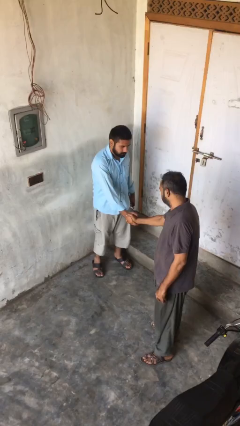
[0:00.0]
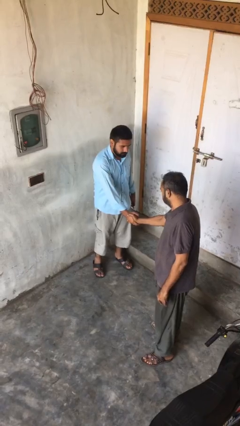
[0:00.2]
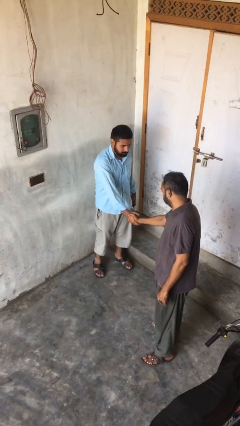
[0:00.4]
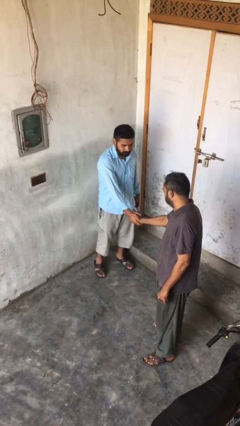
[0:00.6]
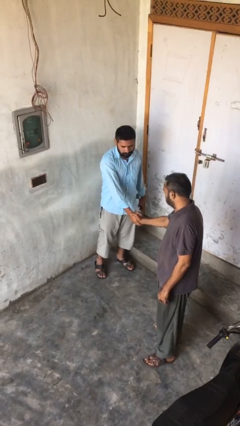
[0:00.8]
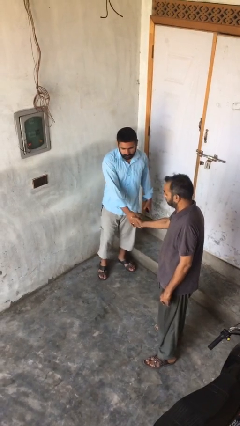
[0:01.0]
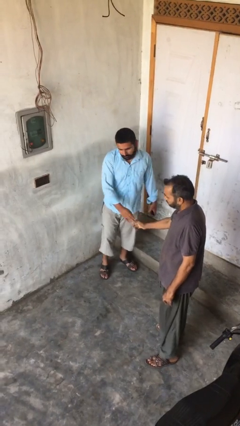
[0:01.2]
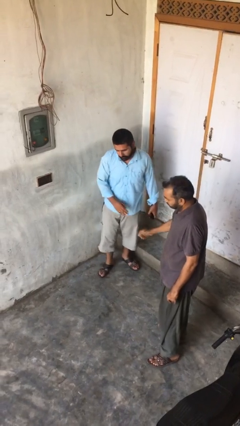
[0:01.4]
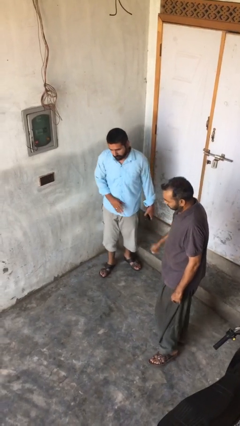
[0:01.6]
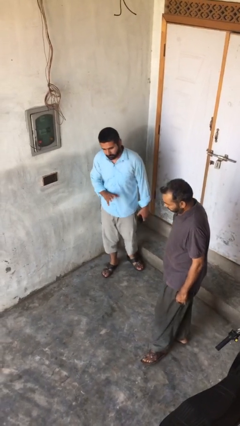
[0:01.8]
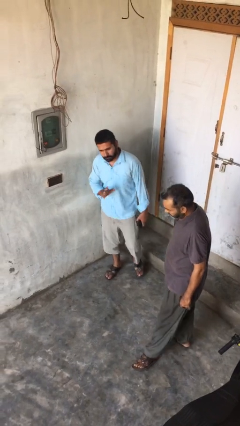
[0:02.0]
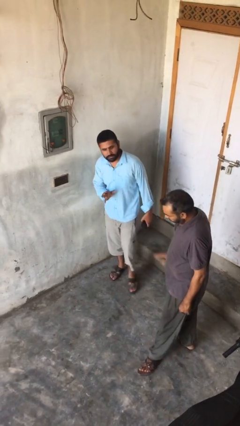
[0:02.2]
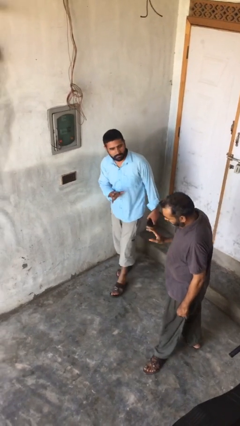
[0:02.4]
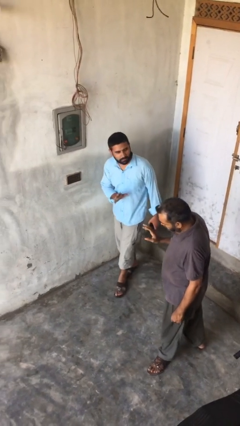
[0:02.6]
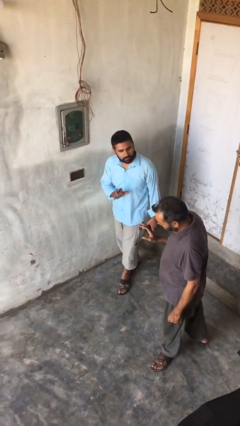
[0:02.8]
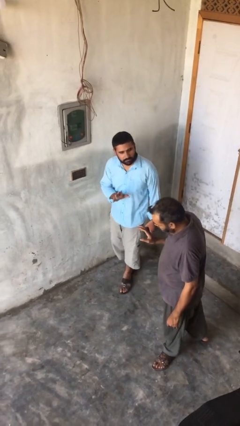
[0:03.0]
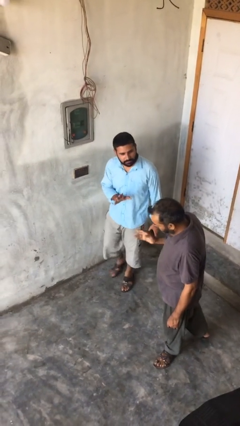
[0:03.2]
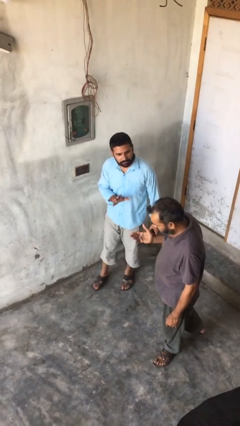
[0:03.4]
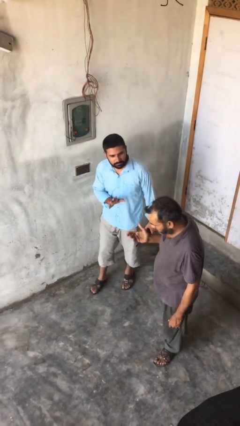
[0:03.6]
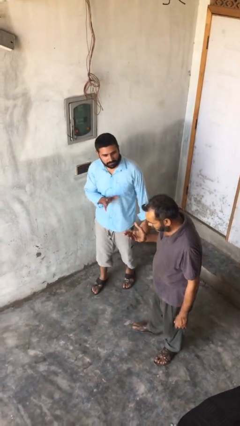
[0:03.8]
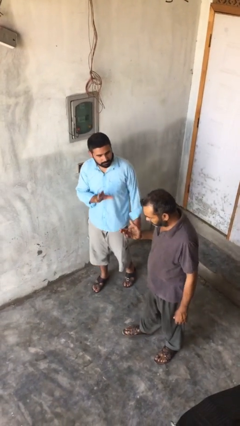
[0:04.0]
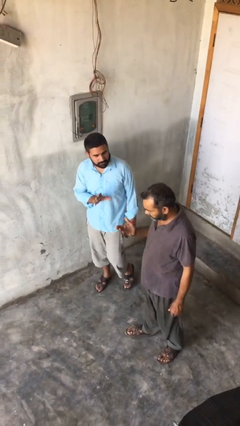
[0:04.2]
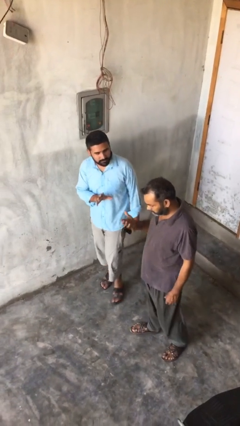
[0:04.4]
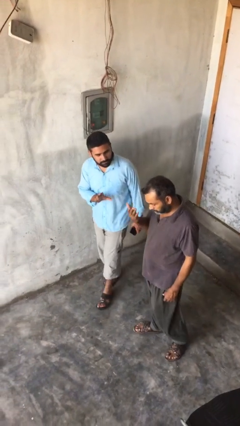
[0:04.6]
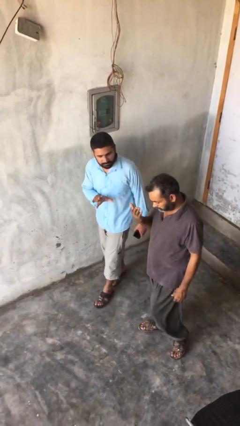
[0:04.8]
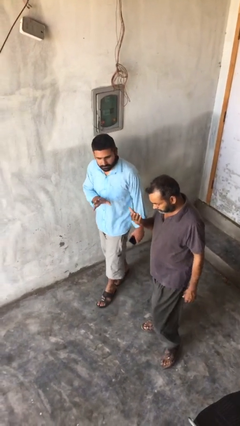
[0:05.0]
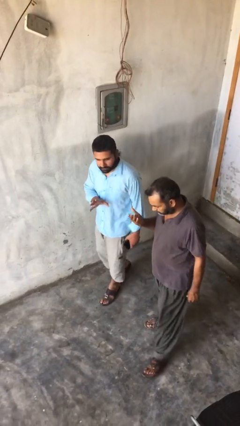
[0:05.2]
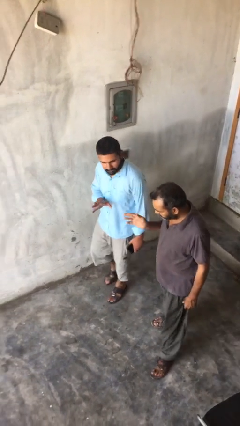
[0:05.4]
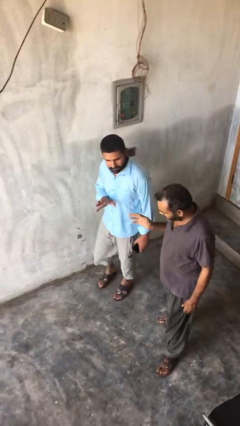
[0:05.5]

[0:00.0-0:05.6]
person talks to person

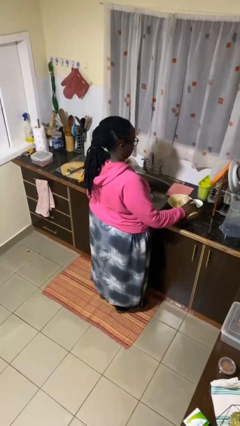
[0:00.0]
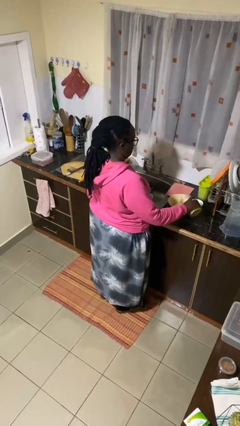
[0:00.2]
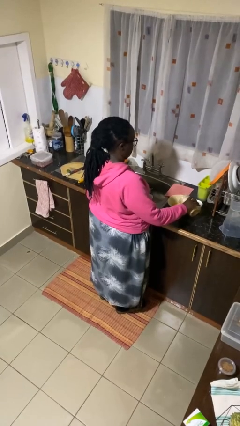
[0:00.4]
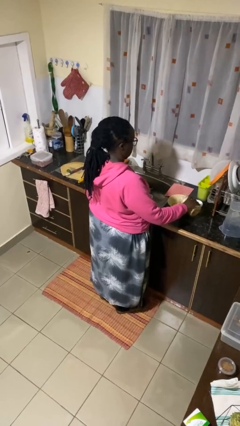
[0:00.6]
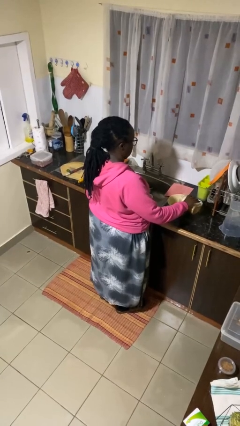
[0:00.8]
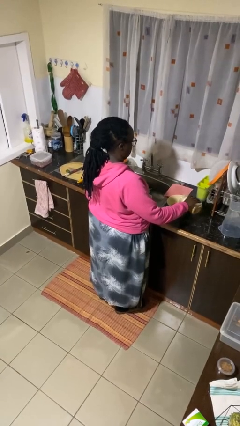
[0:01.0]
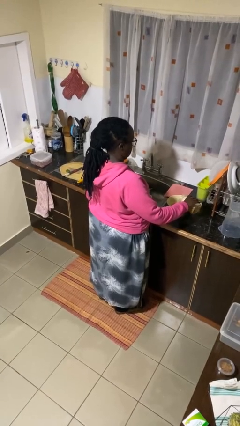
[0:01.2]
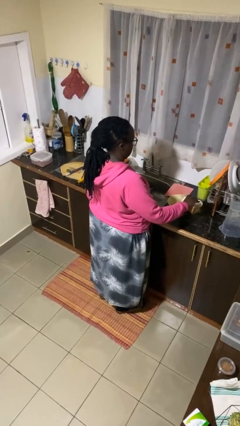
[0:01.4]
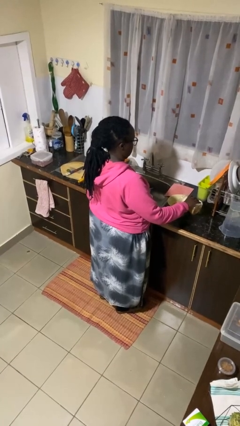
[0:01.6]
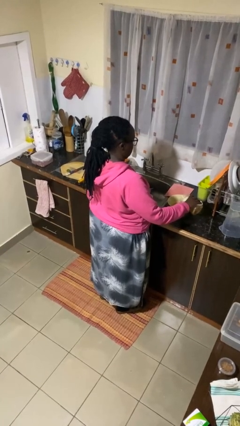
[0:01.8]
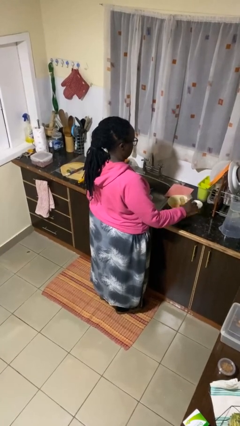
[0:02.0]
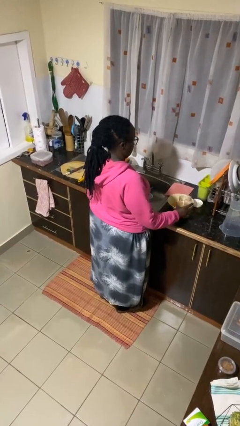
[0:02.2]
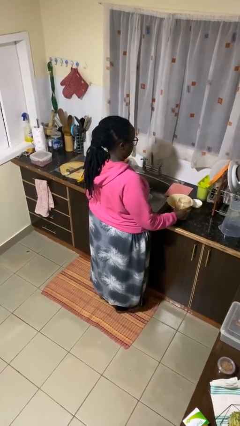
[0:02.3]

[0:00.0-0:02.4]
person pours into bowl

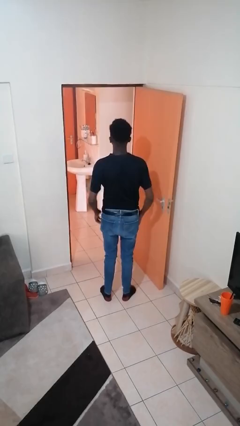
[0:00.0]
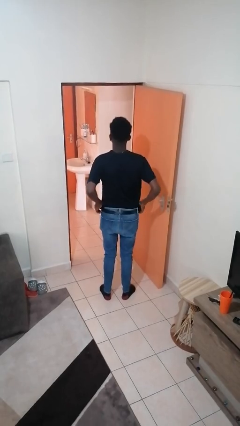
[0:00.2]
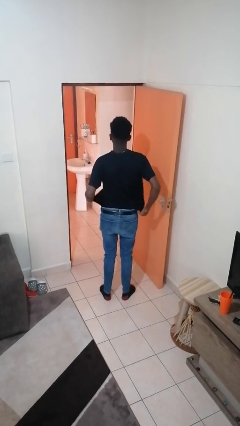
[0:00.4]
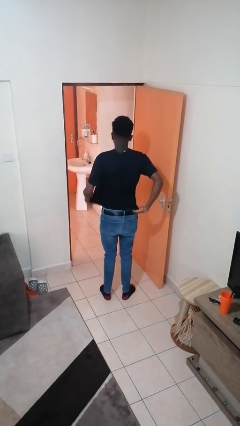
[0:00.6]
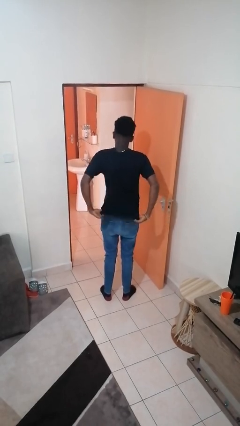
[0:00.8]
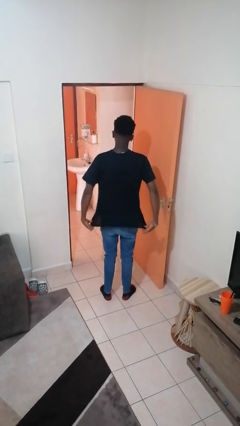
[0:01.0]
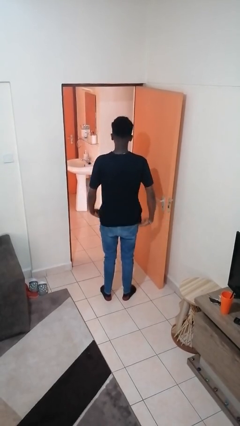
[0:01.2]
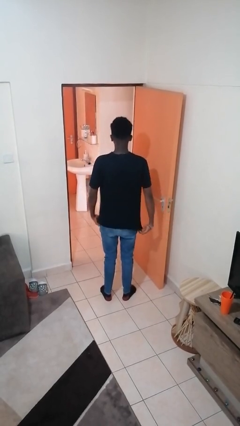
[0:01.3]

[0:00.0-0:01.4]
person untucks shirt

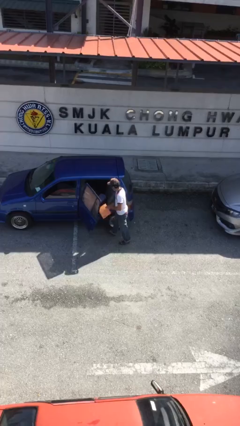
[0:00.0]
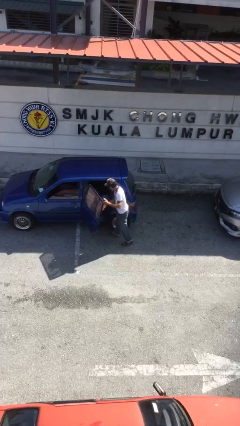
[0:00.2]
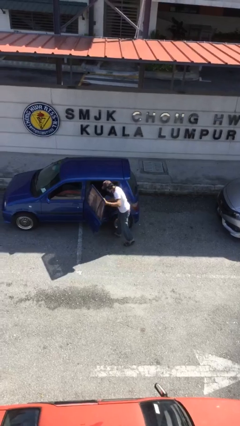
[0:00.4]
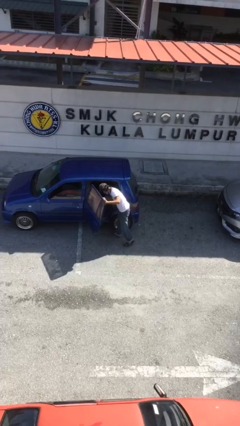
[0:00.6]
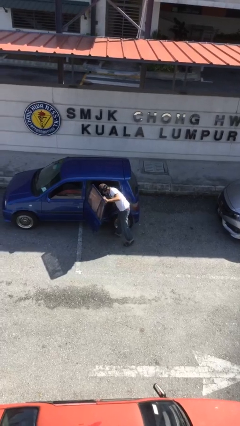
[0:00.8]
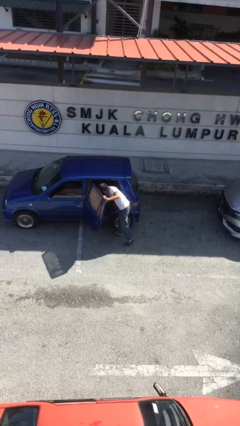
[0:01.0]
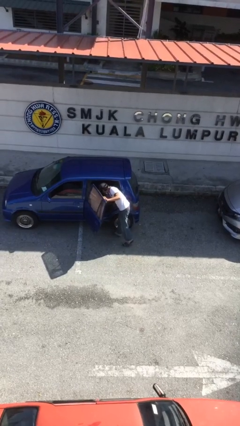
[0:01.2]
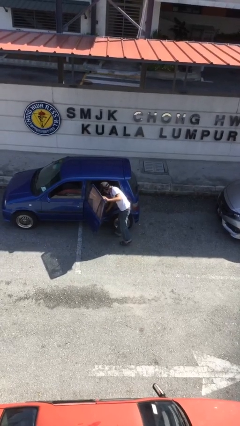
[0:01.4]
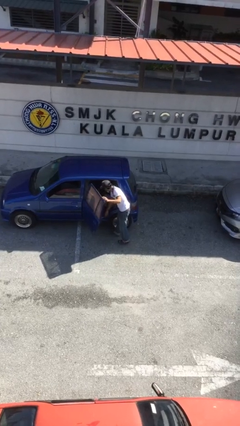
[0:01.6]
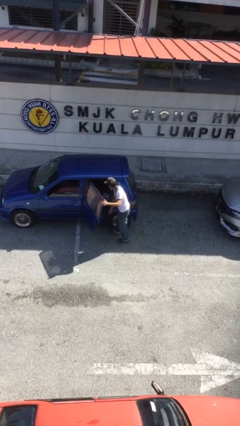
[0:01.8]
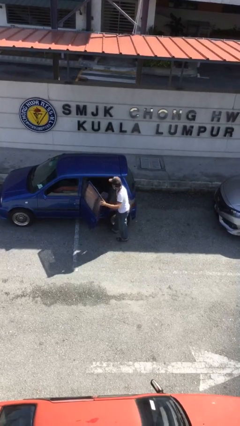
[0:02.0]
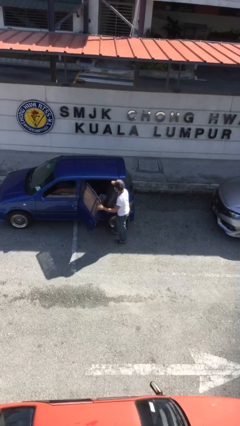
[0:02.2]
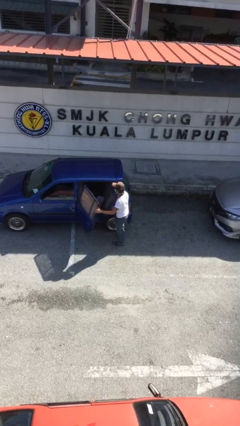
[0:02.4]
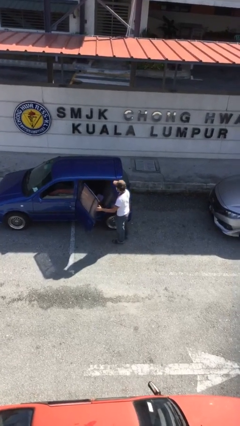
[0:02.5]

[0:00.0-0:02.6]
person loads car

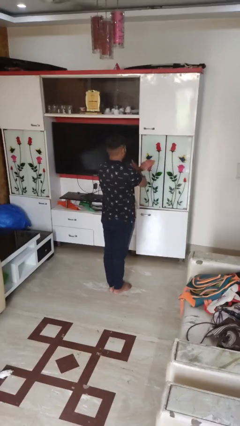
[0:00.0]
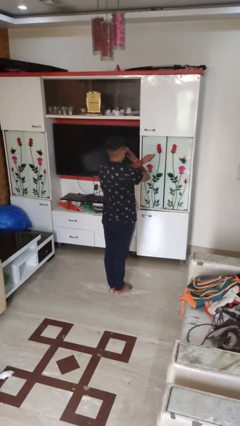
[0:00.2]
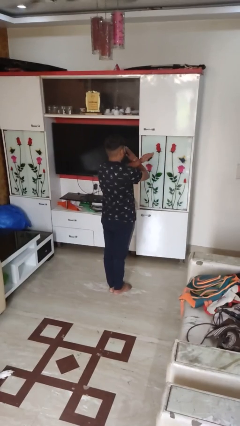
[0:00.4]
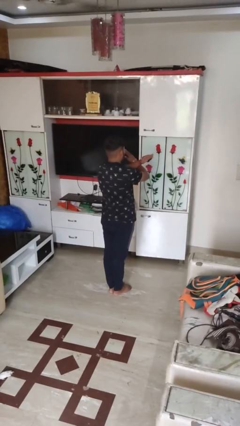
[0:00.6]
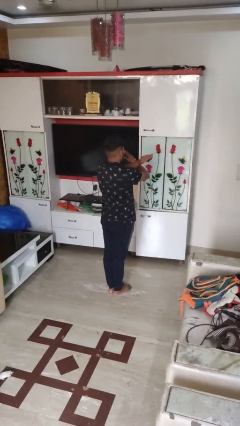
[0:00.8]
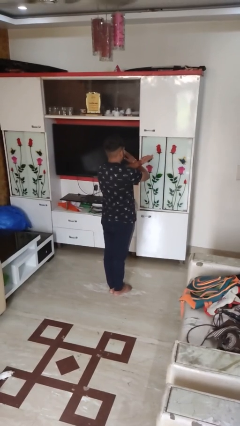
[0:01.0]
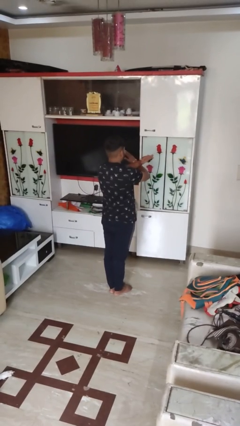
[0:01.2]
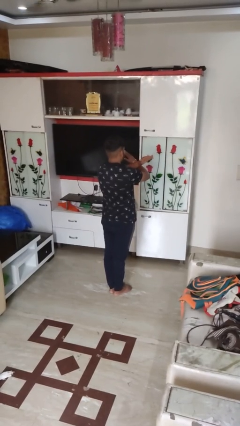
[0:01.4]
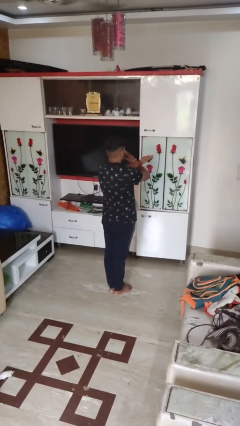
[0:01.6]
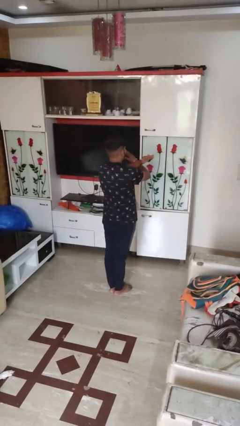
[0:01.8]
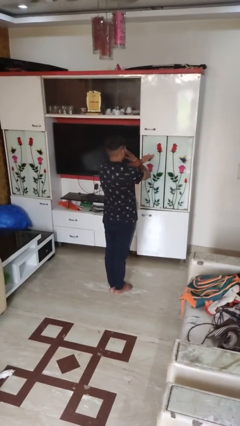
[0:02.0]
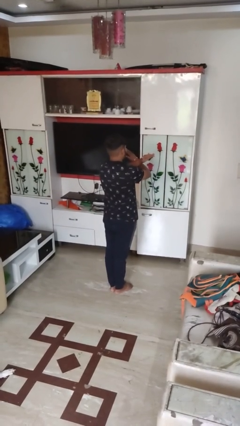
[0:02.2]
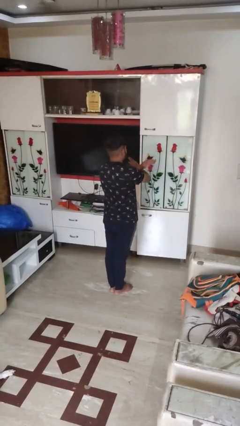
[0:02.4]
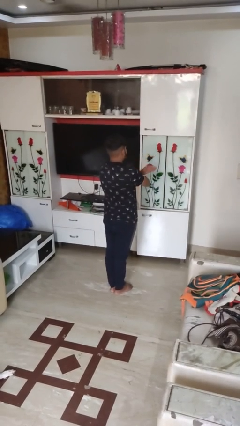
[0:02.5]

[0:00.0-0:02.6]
person gestures arms x

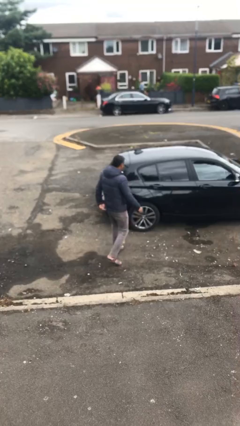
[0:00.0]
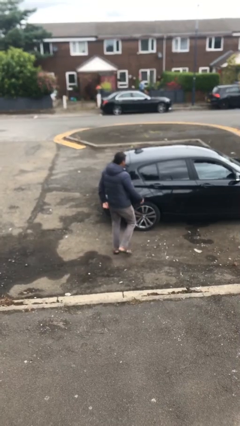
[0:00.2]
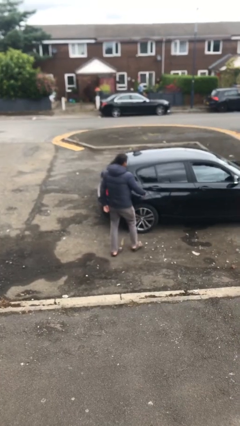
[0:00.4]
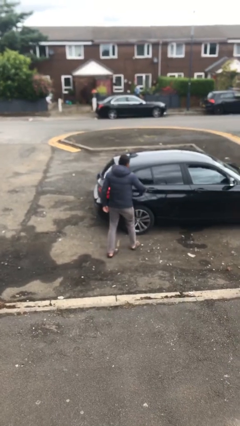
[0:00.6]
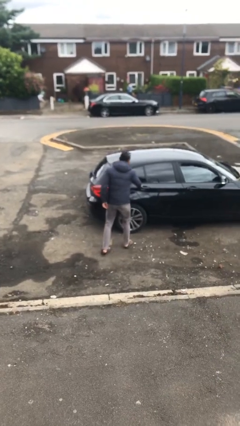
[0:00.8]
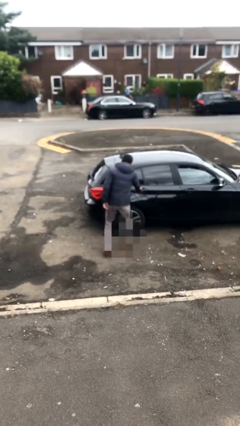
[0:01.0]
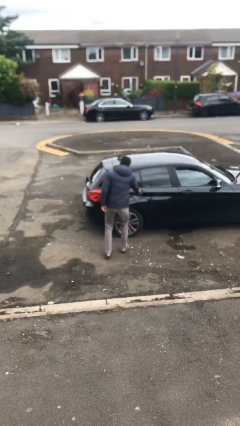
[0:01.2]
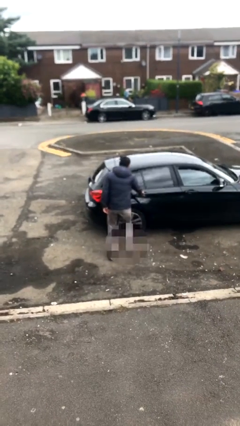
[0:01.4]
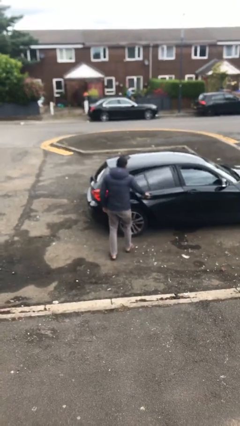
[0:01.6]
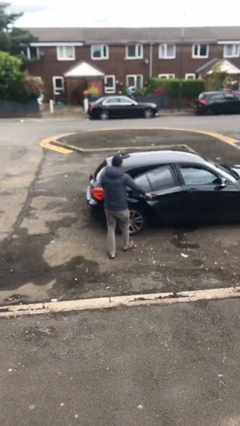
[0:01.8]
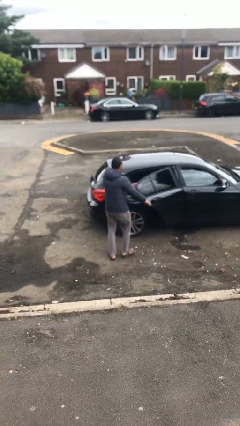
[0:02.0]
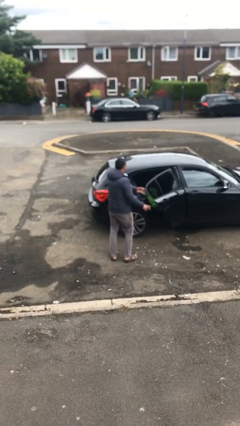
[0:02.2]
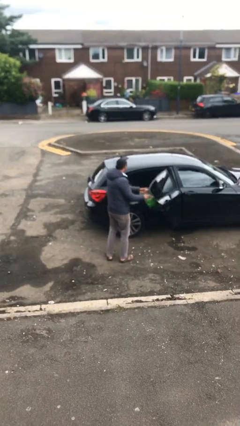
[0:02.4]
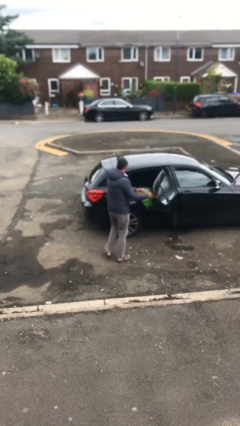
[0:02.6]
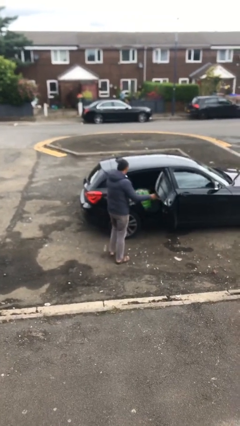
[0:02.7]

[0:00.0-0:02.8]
person opens car door
